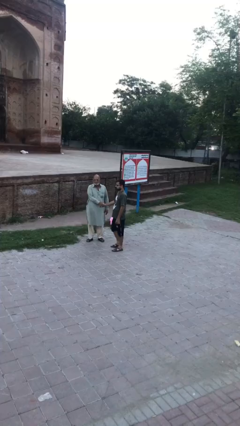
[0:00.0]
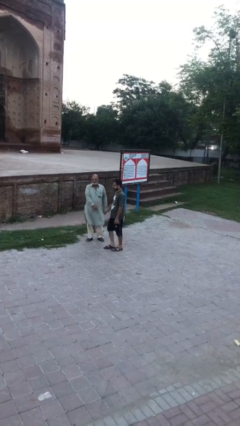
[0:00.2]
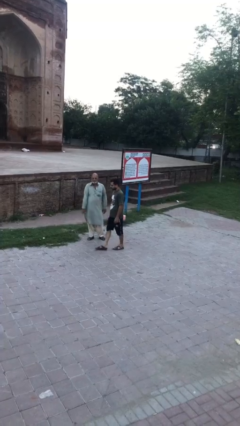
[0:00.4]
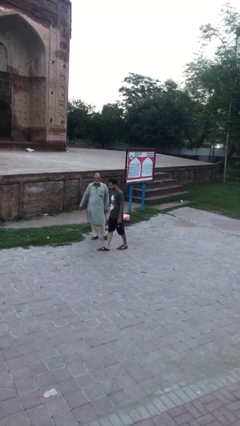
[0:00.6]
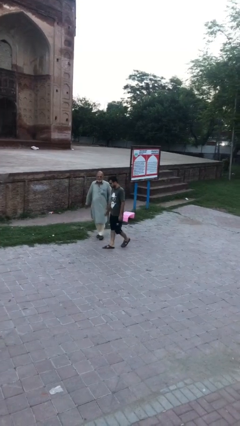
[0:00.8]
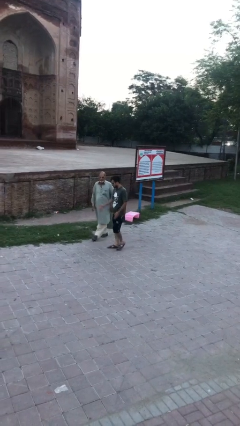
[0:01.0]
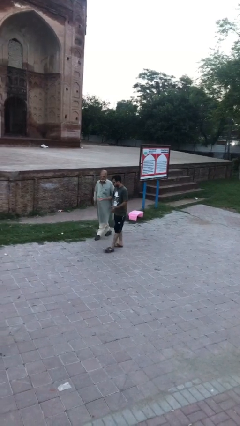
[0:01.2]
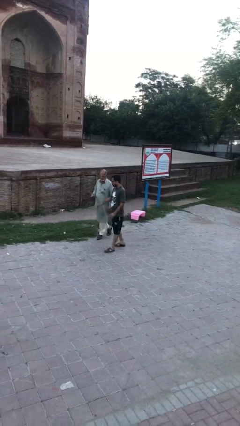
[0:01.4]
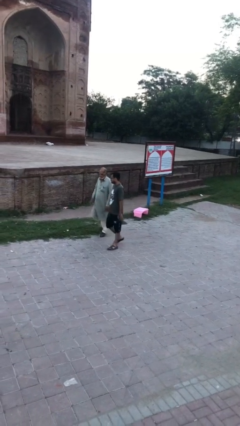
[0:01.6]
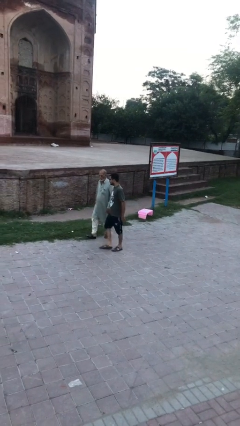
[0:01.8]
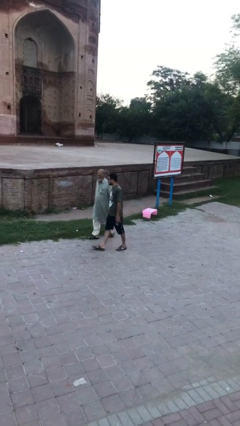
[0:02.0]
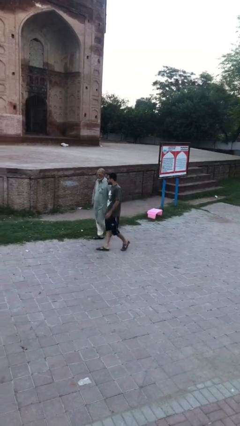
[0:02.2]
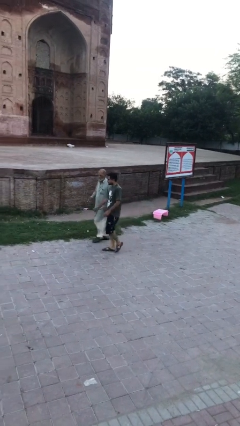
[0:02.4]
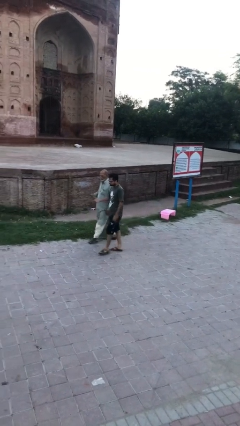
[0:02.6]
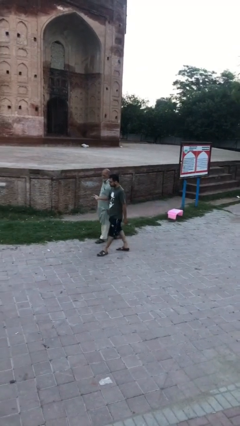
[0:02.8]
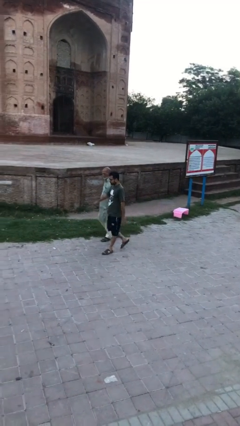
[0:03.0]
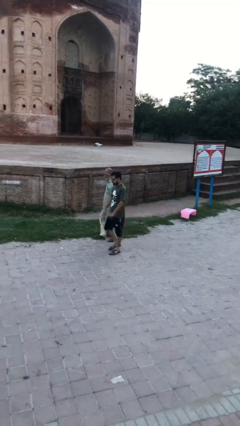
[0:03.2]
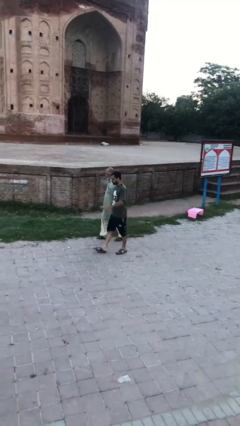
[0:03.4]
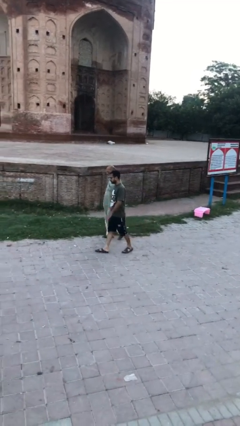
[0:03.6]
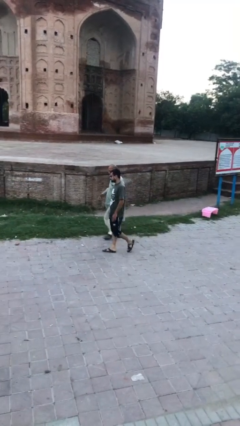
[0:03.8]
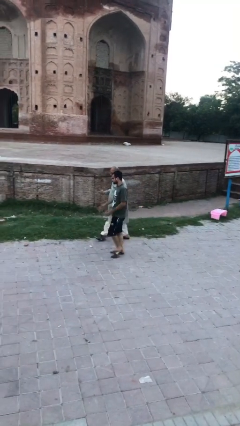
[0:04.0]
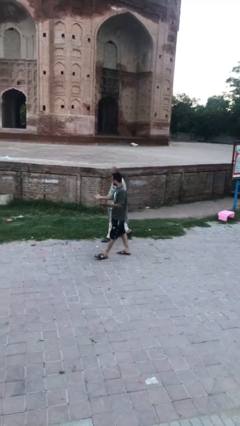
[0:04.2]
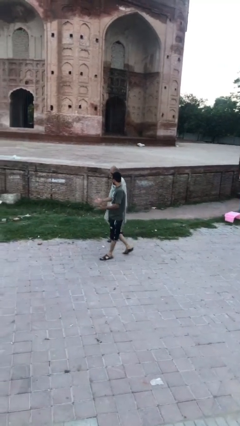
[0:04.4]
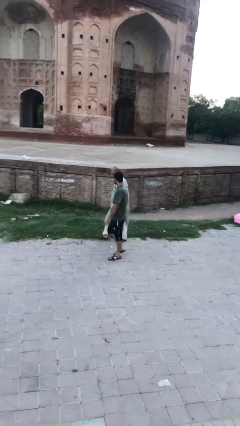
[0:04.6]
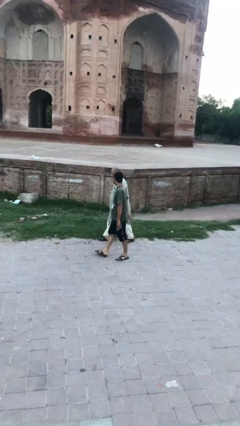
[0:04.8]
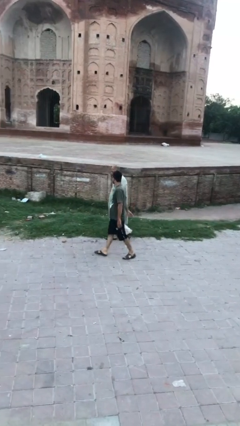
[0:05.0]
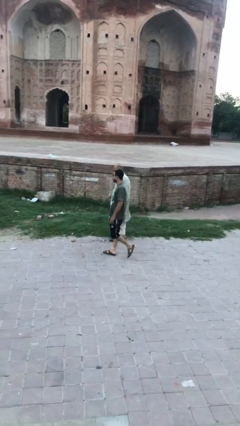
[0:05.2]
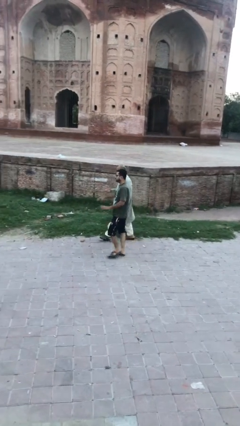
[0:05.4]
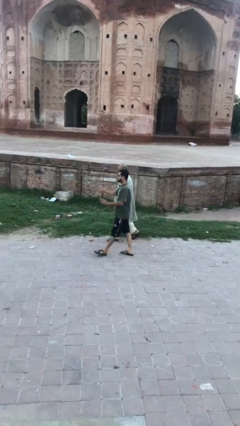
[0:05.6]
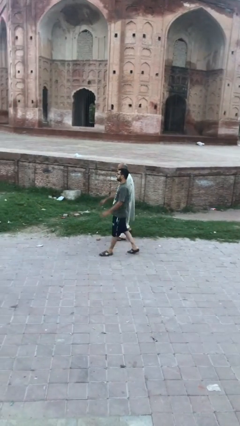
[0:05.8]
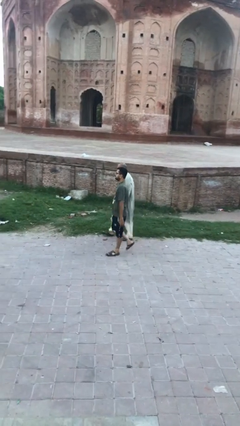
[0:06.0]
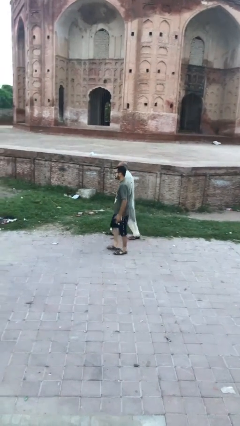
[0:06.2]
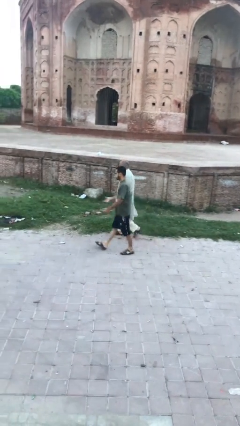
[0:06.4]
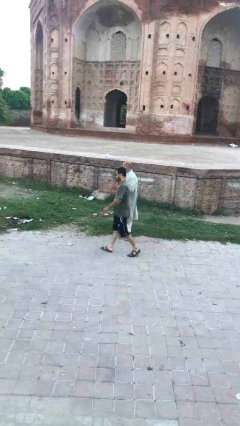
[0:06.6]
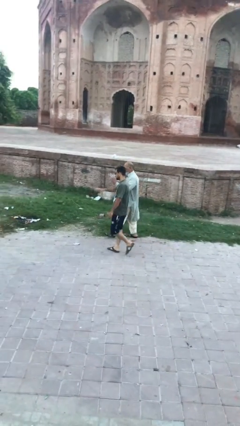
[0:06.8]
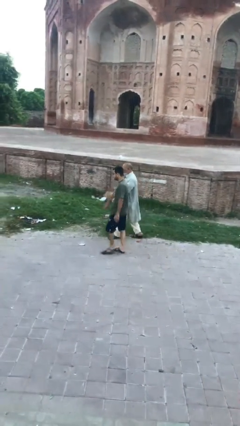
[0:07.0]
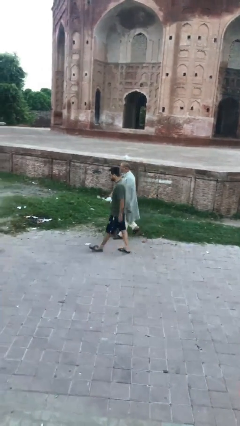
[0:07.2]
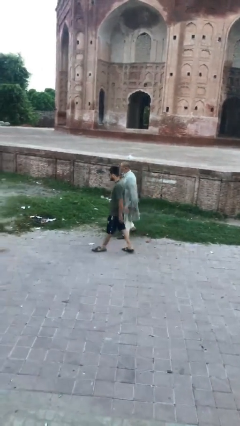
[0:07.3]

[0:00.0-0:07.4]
person talks to person

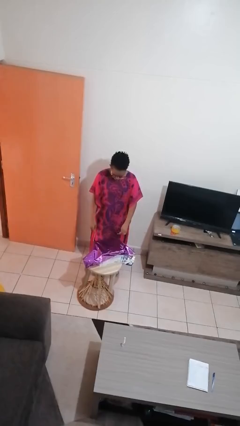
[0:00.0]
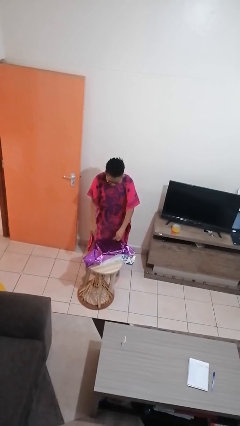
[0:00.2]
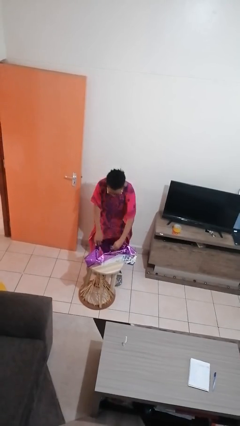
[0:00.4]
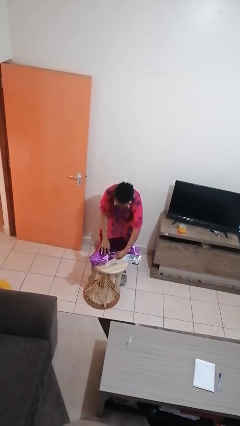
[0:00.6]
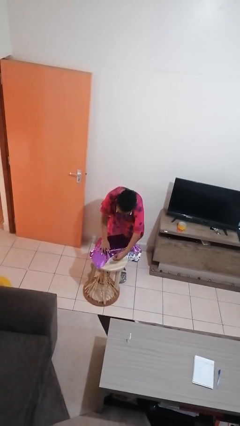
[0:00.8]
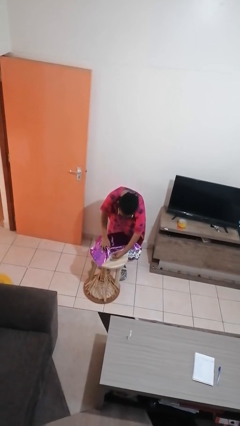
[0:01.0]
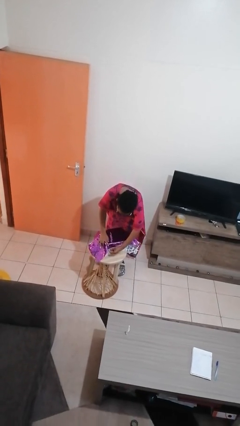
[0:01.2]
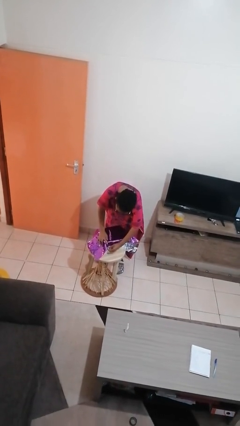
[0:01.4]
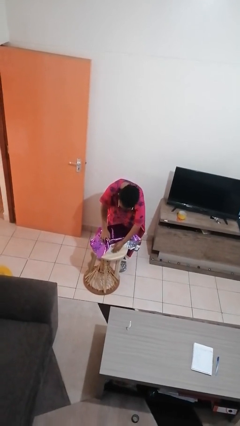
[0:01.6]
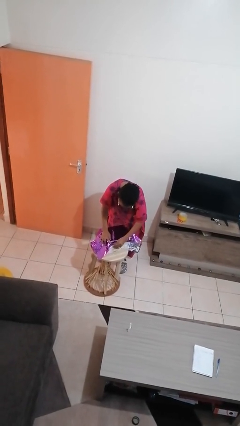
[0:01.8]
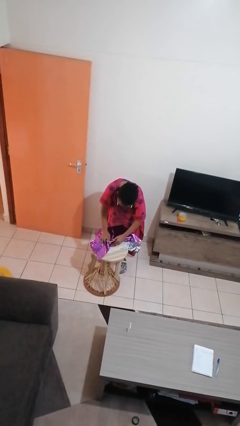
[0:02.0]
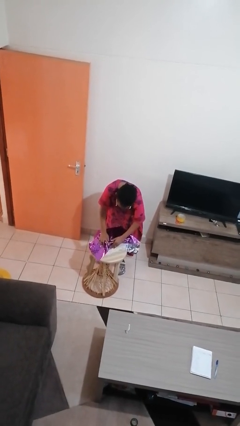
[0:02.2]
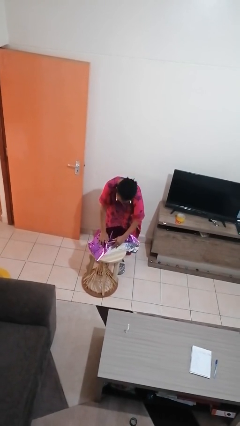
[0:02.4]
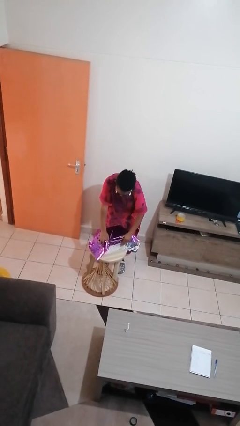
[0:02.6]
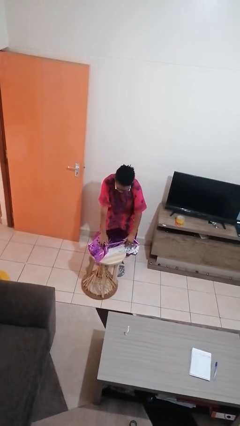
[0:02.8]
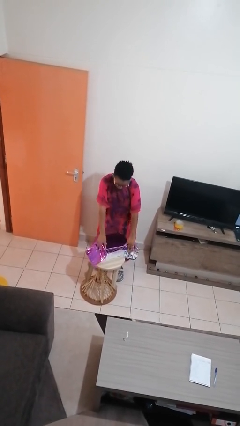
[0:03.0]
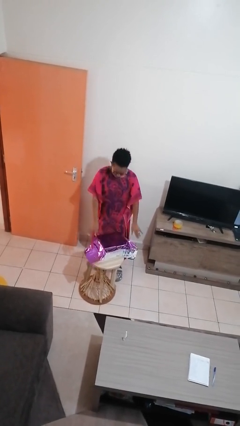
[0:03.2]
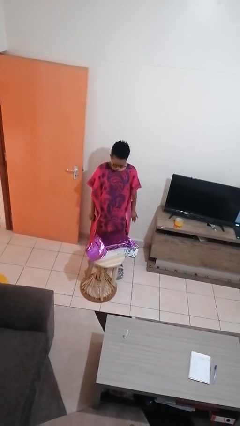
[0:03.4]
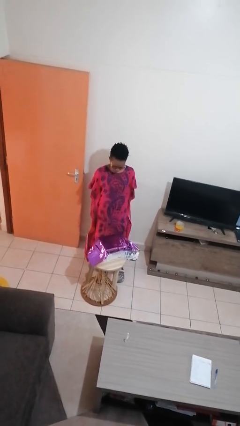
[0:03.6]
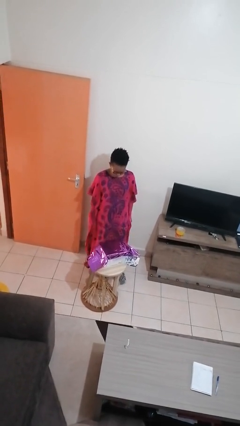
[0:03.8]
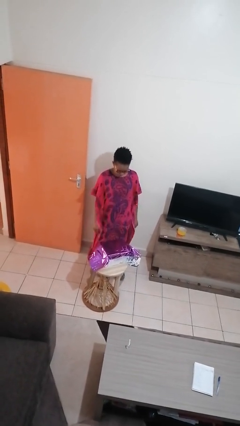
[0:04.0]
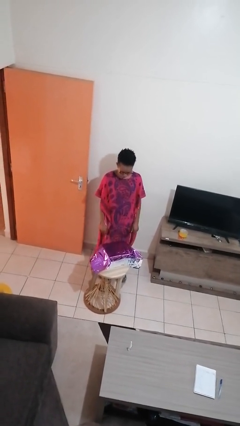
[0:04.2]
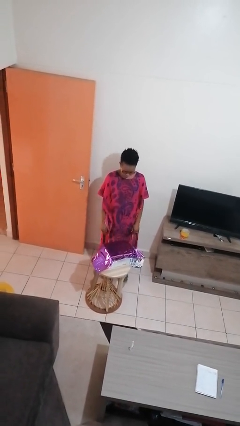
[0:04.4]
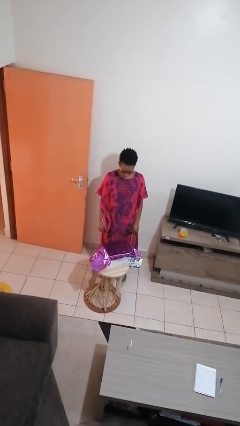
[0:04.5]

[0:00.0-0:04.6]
person wraps box

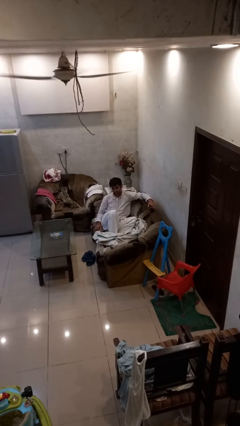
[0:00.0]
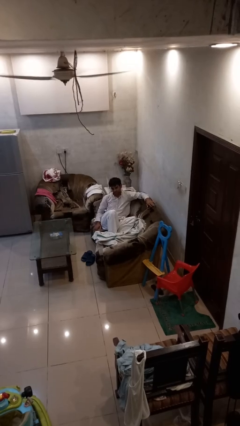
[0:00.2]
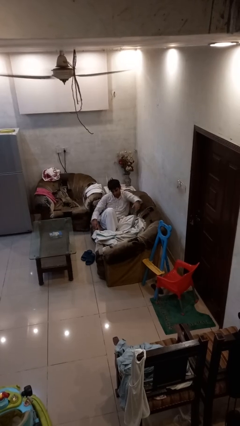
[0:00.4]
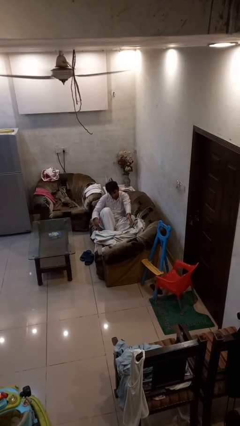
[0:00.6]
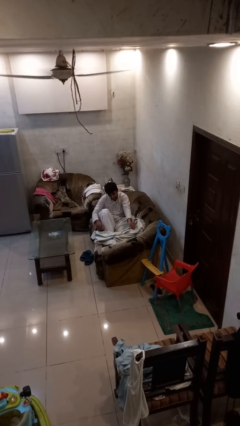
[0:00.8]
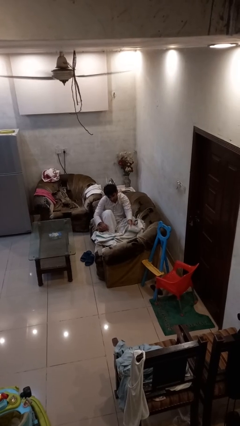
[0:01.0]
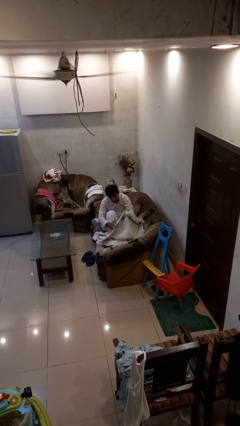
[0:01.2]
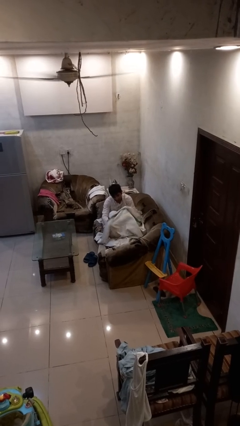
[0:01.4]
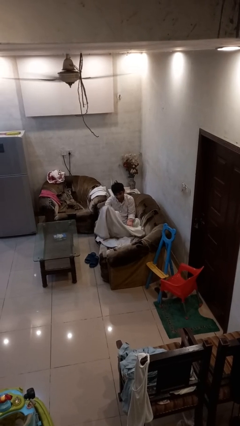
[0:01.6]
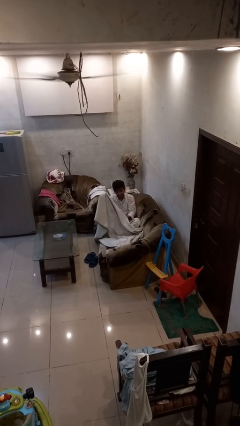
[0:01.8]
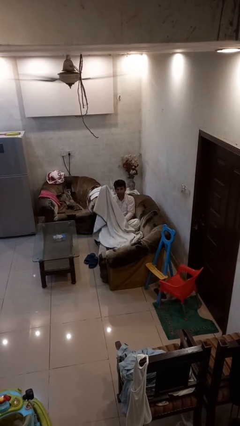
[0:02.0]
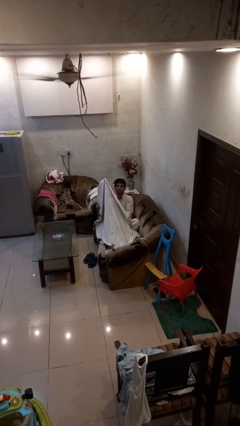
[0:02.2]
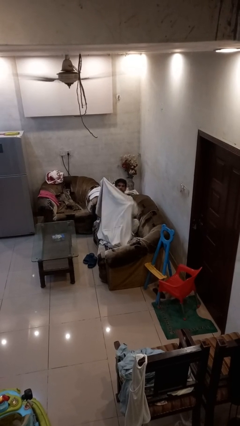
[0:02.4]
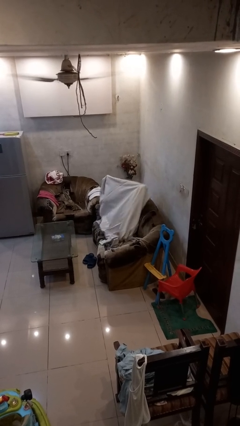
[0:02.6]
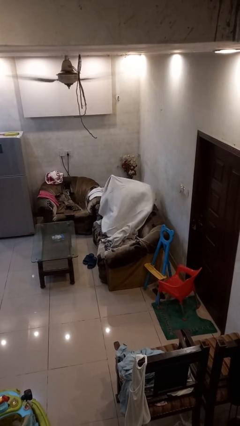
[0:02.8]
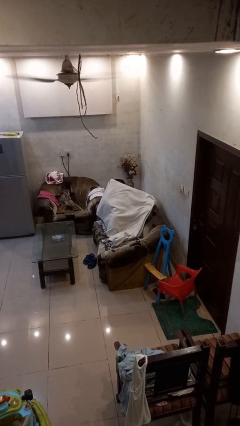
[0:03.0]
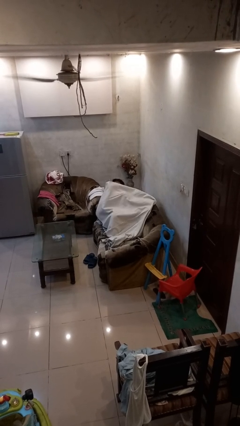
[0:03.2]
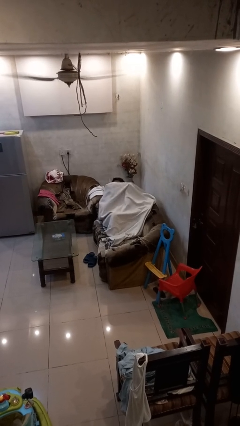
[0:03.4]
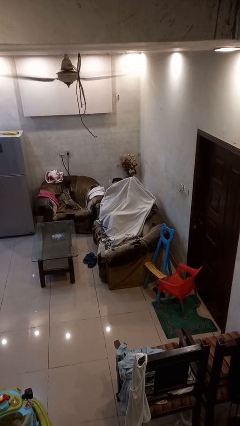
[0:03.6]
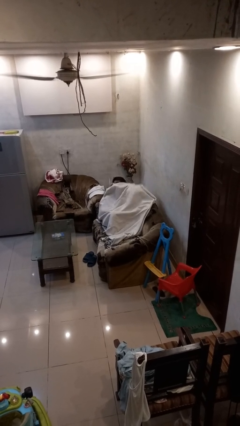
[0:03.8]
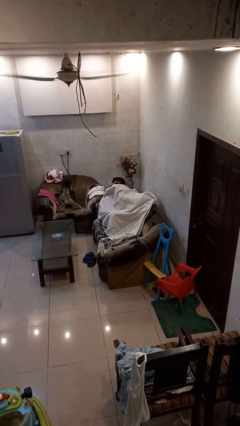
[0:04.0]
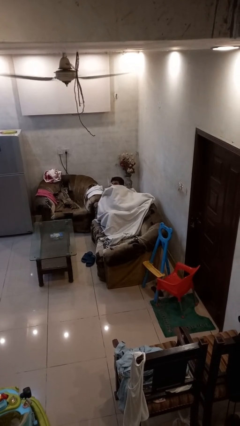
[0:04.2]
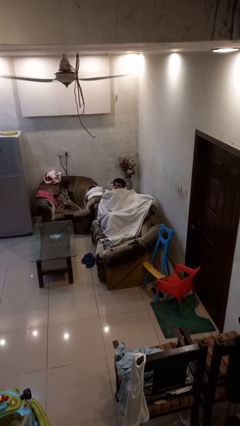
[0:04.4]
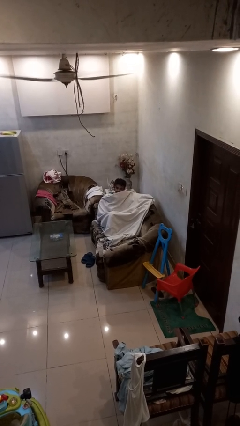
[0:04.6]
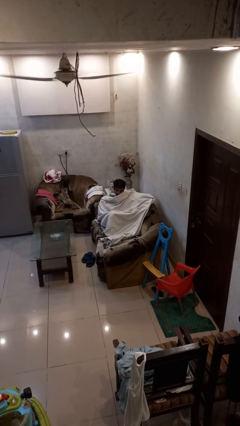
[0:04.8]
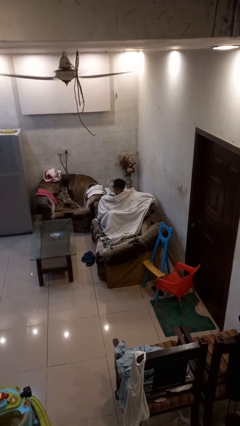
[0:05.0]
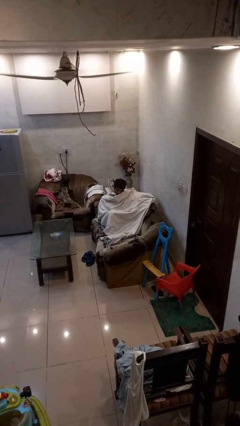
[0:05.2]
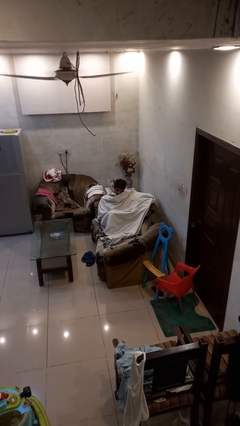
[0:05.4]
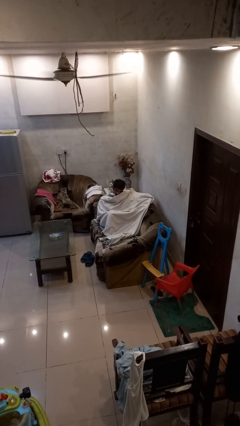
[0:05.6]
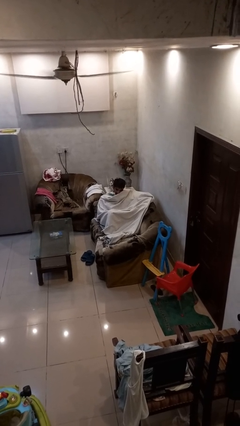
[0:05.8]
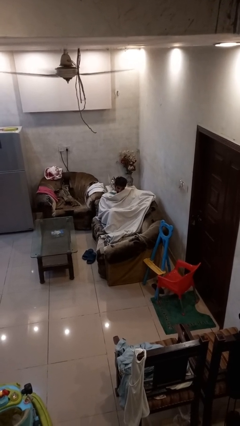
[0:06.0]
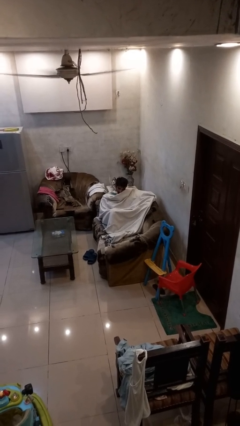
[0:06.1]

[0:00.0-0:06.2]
person covers with blanket
